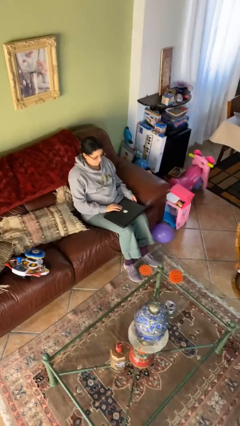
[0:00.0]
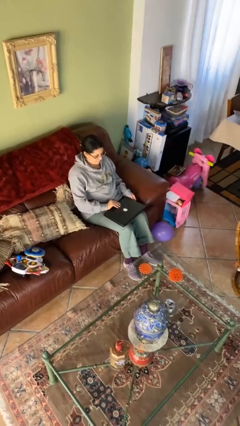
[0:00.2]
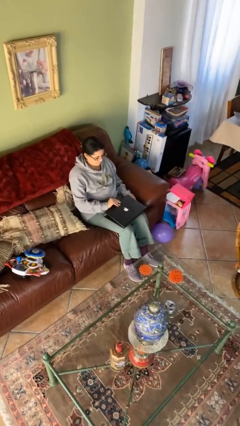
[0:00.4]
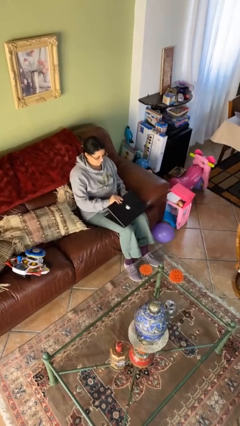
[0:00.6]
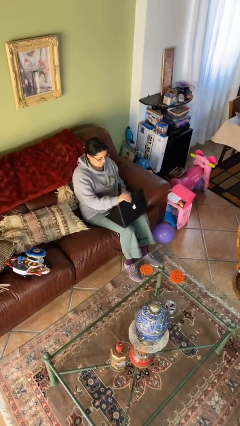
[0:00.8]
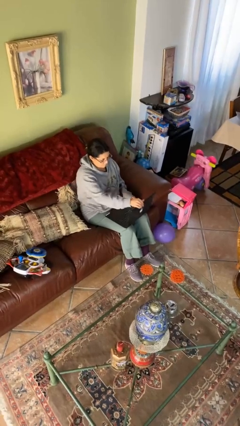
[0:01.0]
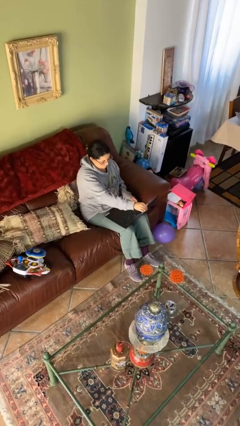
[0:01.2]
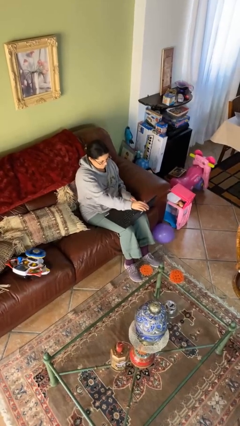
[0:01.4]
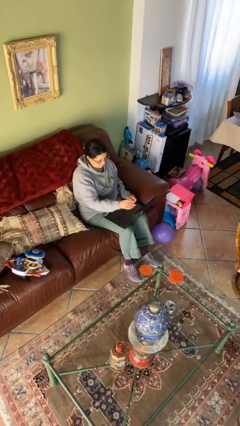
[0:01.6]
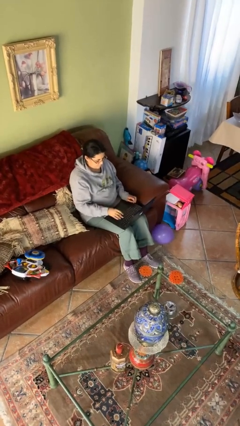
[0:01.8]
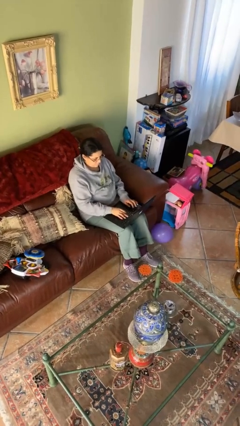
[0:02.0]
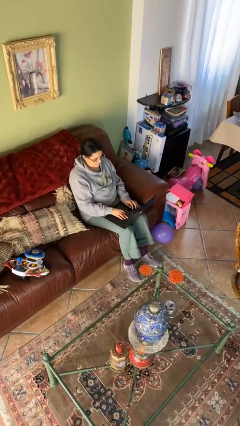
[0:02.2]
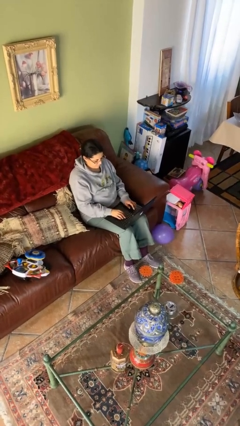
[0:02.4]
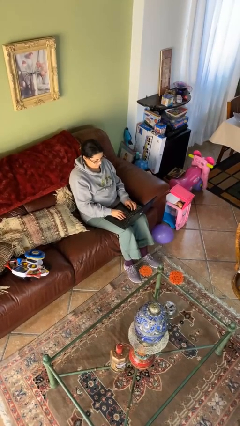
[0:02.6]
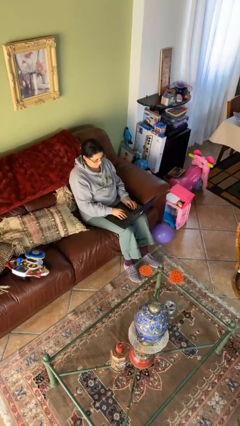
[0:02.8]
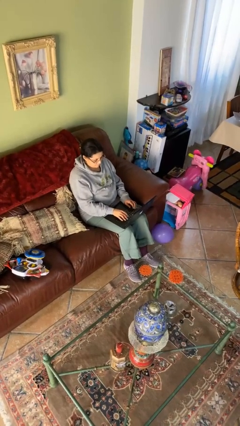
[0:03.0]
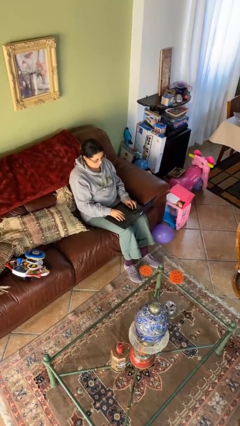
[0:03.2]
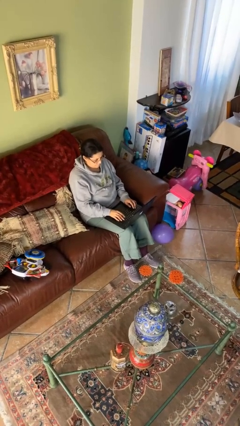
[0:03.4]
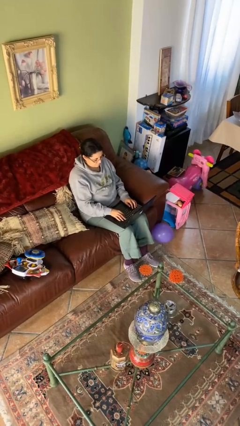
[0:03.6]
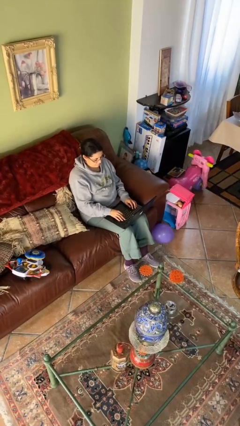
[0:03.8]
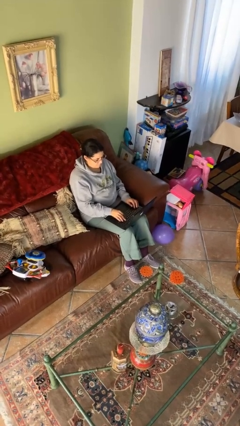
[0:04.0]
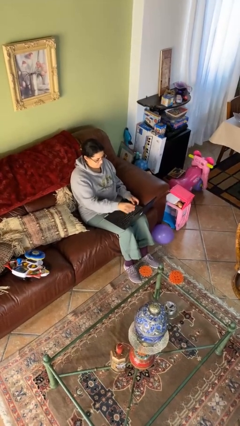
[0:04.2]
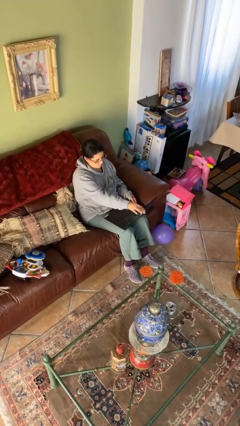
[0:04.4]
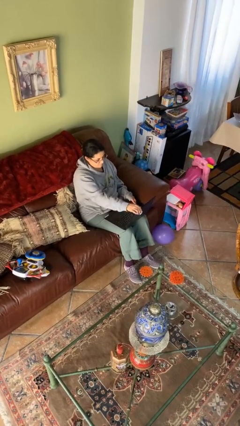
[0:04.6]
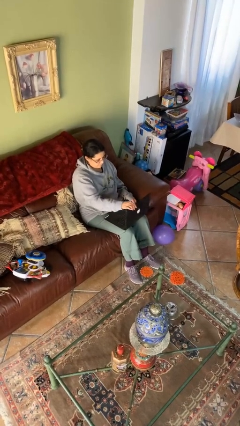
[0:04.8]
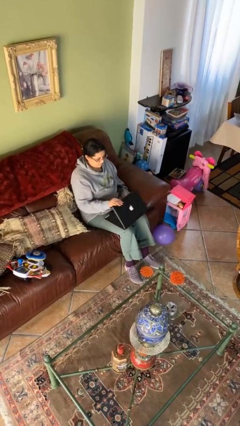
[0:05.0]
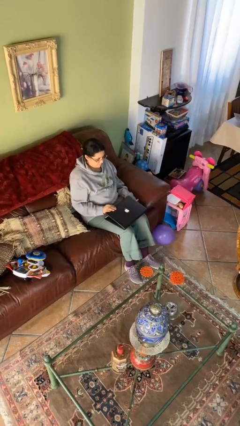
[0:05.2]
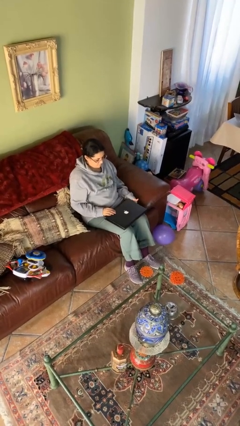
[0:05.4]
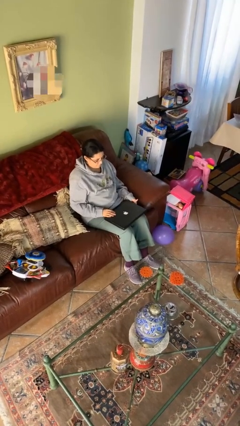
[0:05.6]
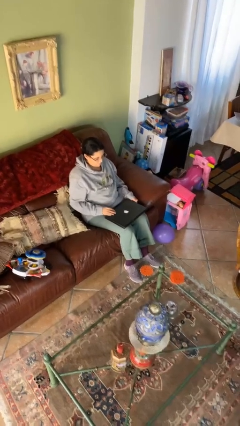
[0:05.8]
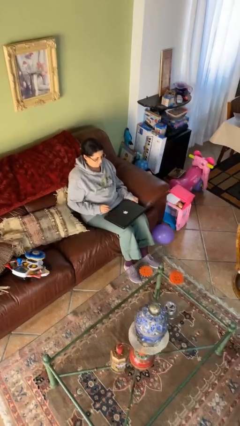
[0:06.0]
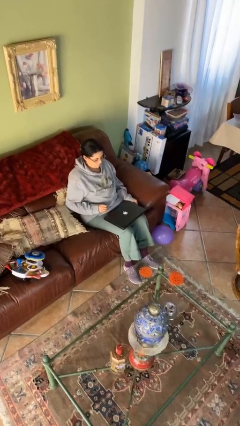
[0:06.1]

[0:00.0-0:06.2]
person interacts with laptop

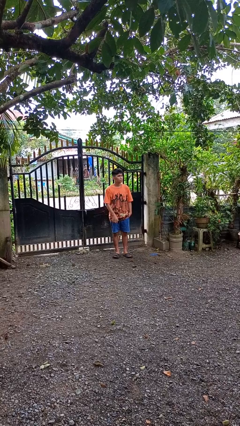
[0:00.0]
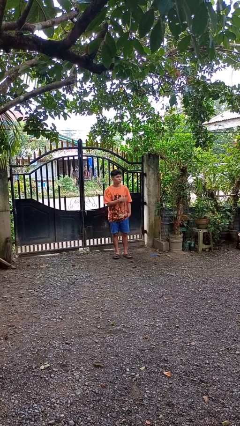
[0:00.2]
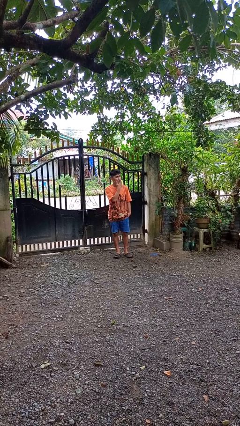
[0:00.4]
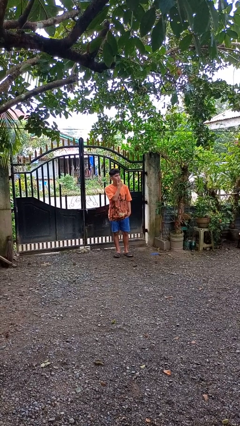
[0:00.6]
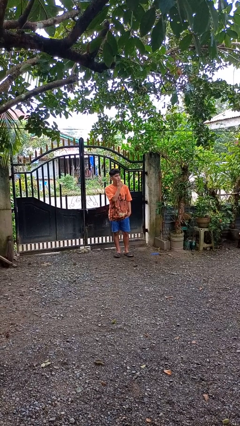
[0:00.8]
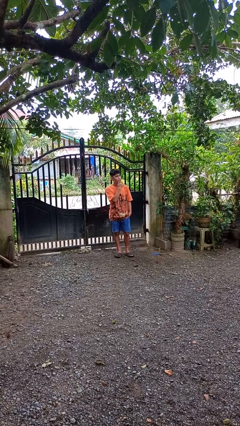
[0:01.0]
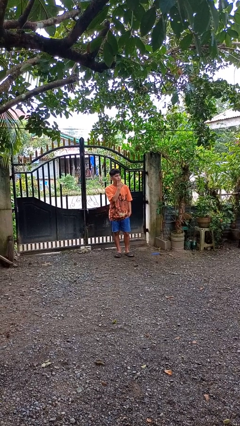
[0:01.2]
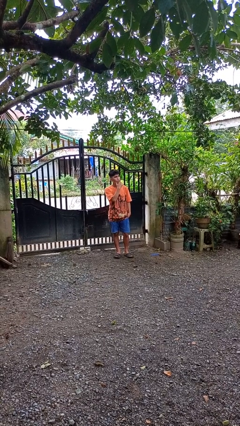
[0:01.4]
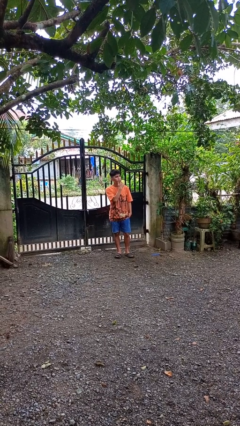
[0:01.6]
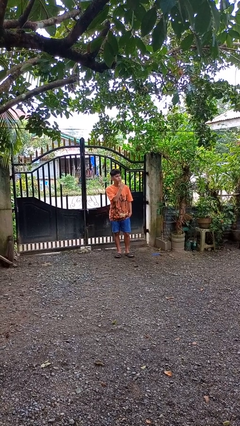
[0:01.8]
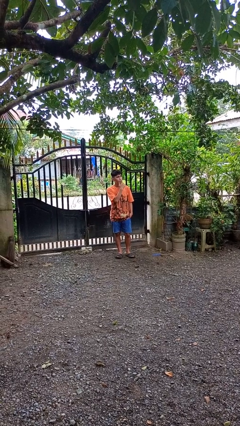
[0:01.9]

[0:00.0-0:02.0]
person strokes chin

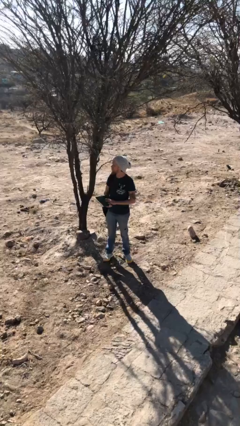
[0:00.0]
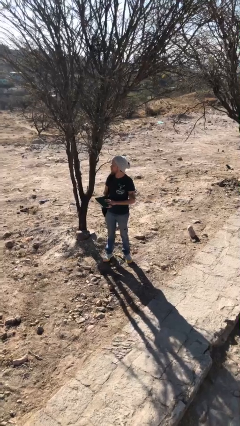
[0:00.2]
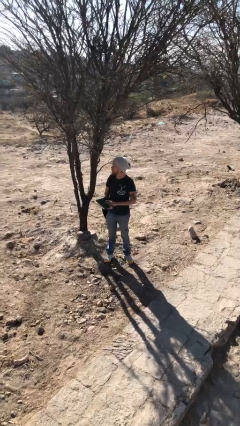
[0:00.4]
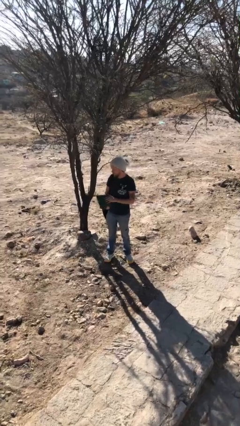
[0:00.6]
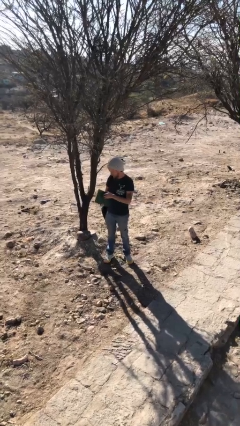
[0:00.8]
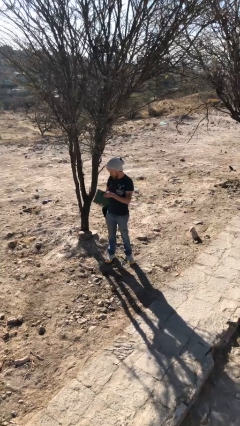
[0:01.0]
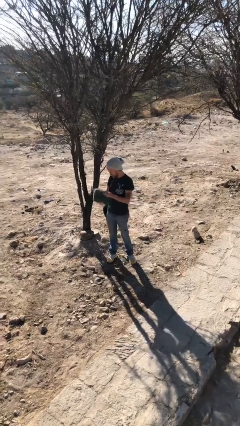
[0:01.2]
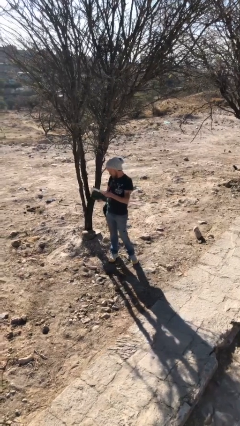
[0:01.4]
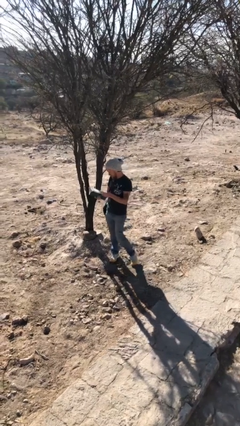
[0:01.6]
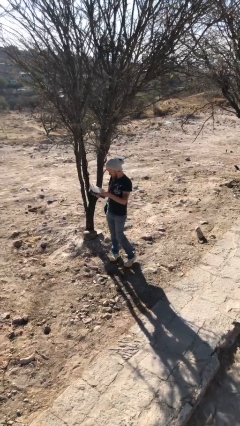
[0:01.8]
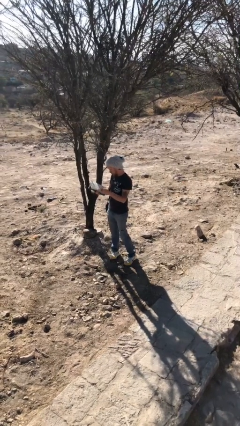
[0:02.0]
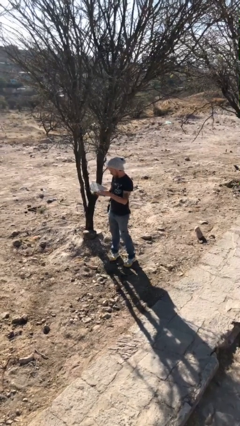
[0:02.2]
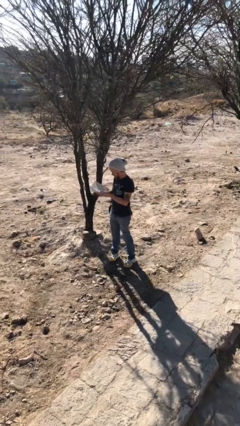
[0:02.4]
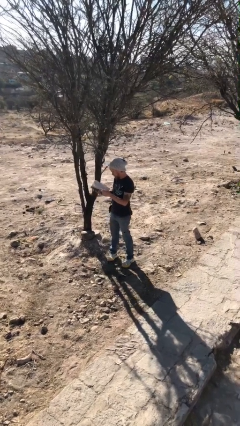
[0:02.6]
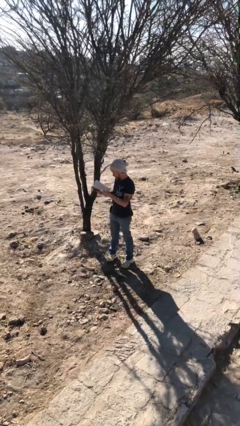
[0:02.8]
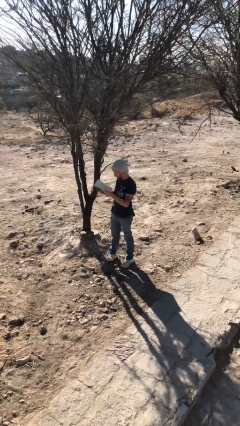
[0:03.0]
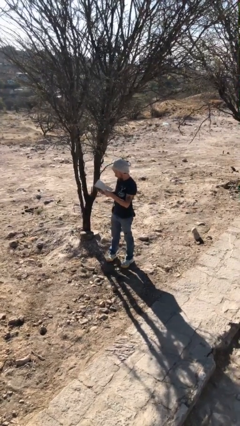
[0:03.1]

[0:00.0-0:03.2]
person reads document

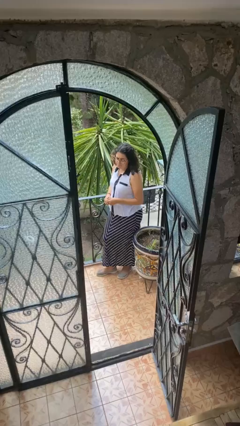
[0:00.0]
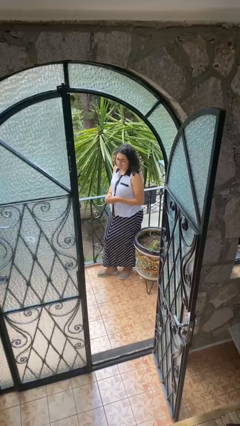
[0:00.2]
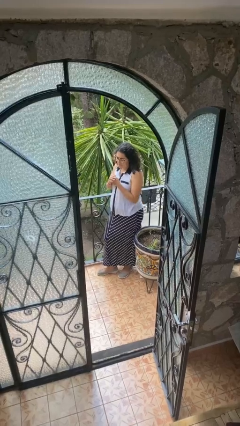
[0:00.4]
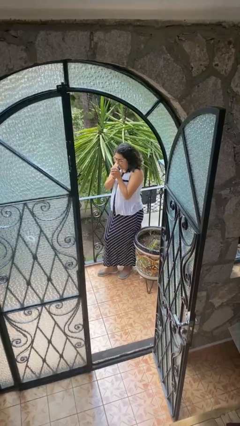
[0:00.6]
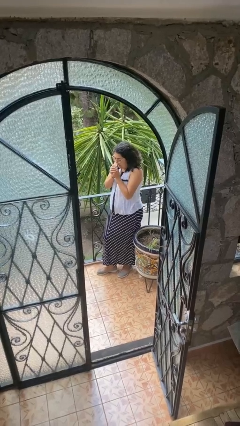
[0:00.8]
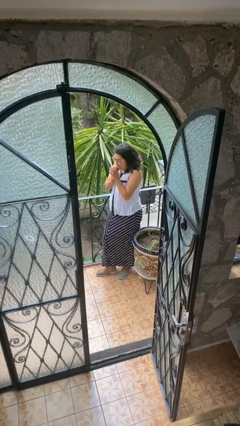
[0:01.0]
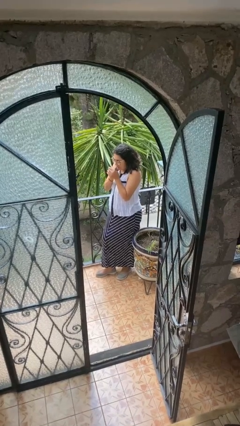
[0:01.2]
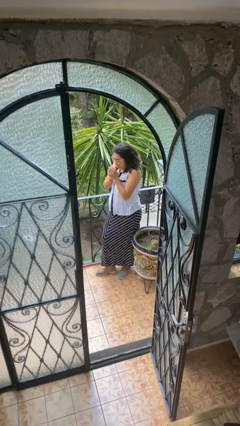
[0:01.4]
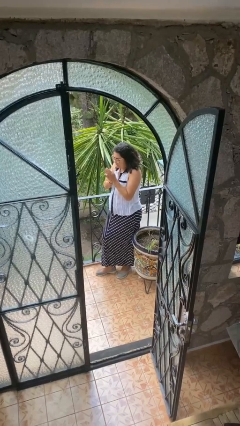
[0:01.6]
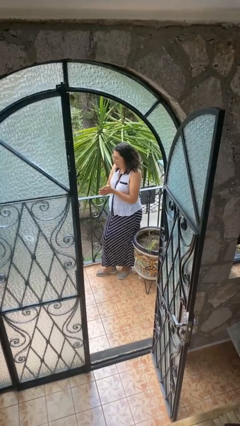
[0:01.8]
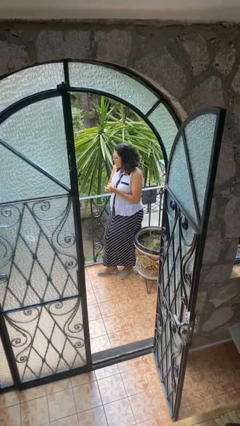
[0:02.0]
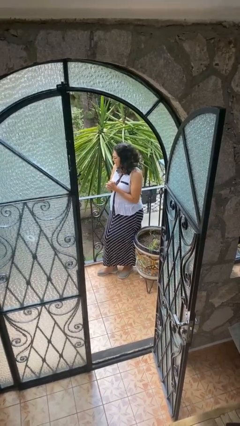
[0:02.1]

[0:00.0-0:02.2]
person blows into hands

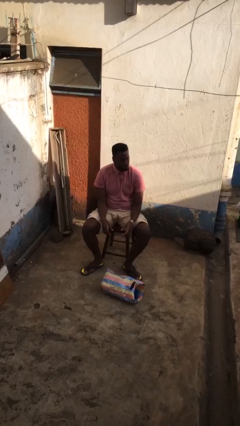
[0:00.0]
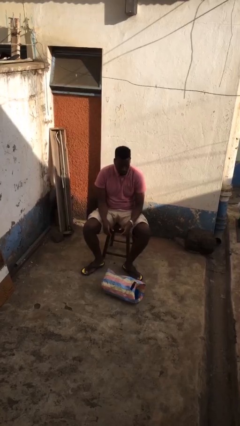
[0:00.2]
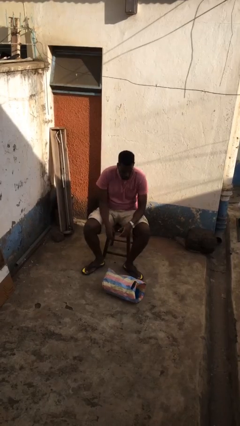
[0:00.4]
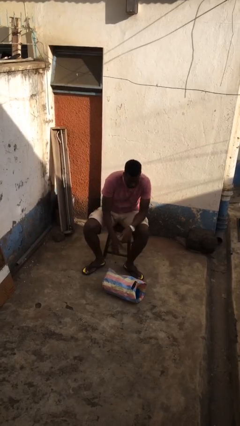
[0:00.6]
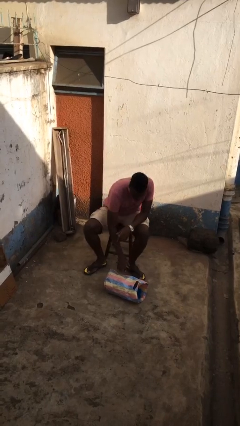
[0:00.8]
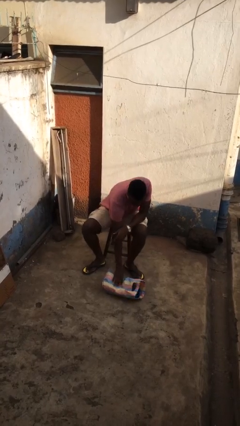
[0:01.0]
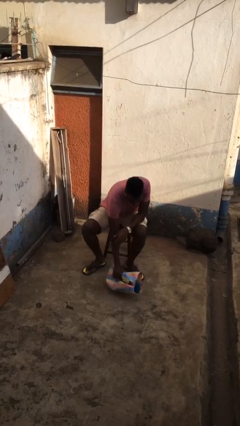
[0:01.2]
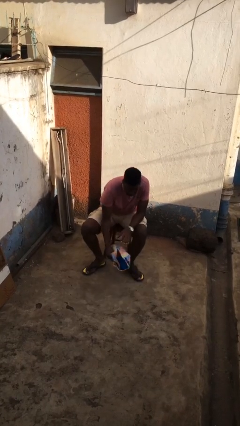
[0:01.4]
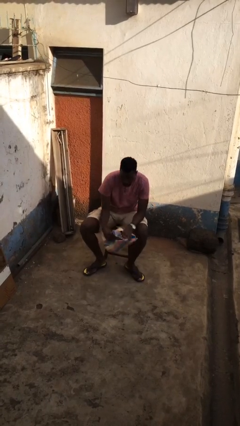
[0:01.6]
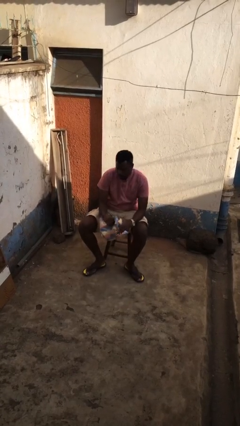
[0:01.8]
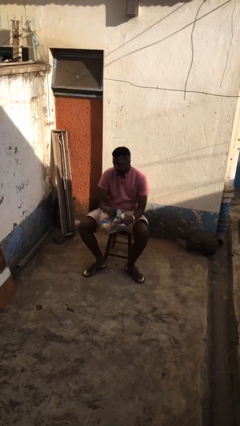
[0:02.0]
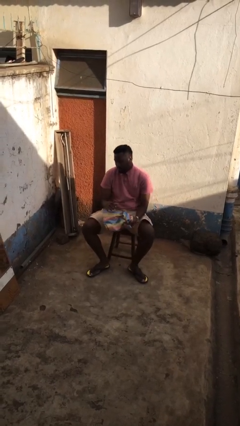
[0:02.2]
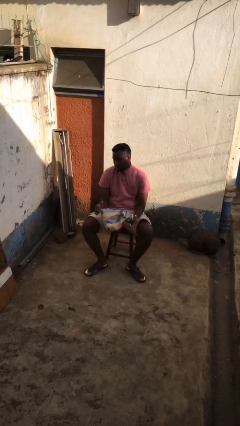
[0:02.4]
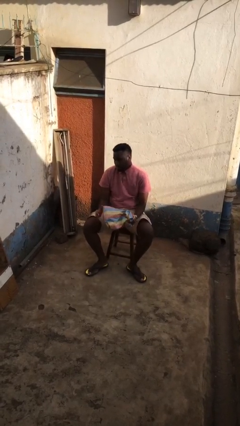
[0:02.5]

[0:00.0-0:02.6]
person picks up object from floor

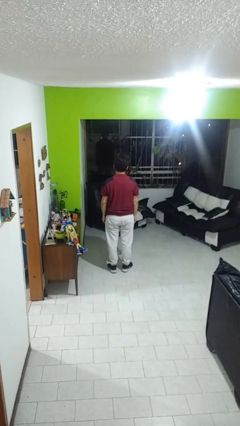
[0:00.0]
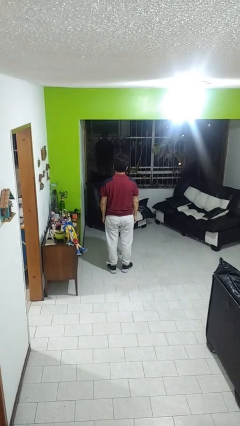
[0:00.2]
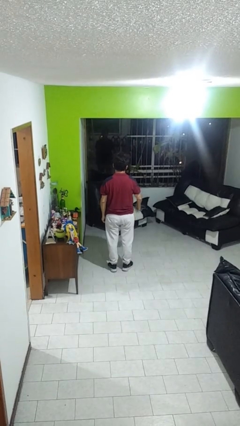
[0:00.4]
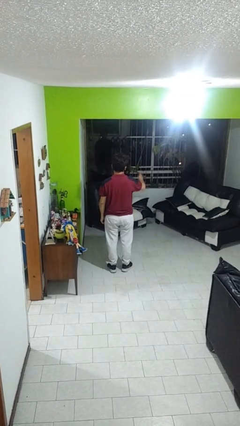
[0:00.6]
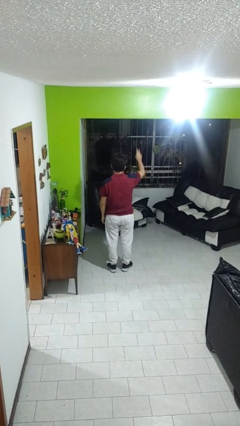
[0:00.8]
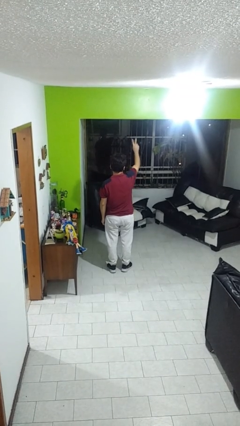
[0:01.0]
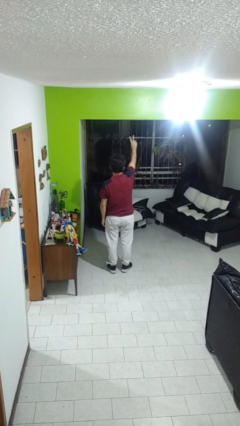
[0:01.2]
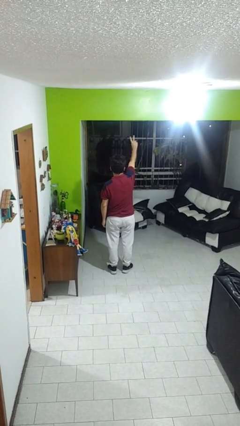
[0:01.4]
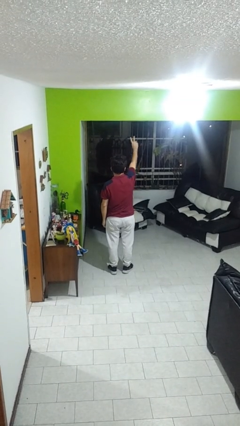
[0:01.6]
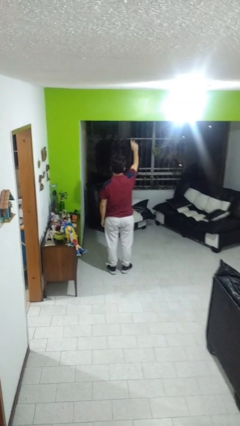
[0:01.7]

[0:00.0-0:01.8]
person gestures peace
